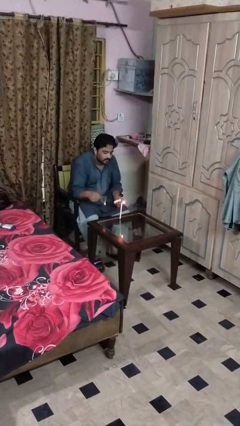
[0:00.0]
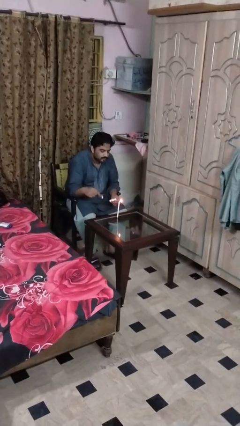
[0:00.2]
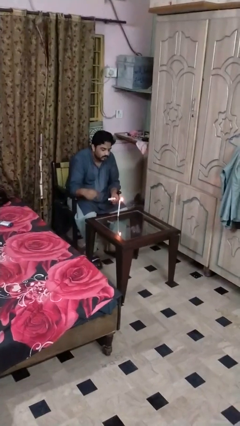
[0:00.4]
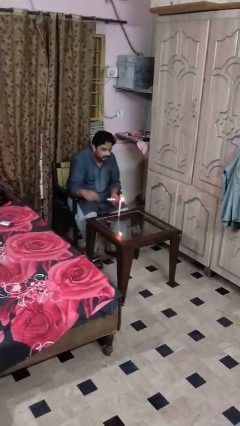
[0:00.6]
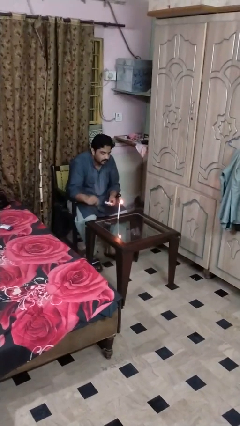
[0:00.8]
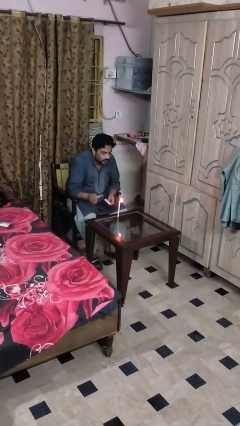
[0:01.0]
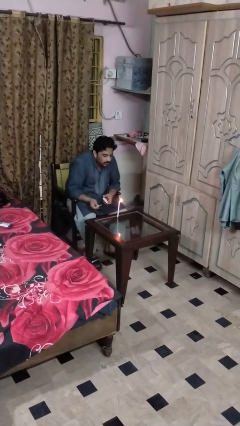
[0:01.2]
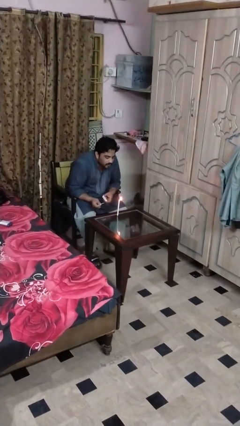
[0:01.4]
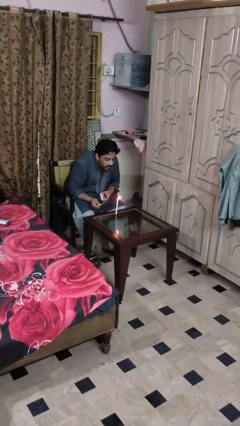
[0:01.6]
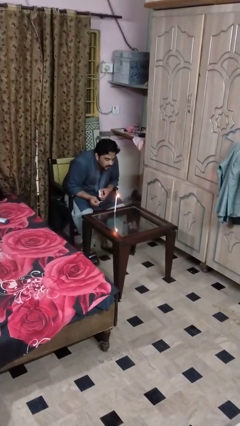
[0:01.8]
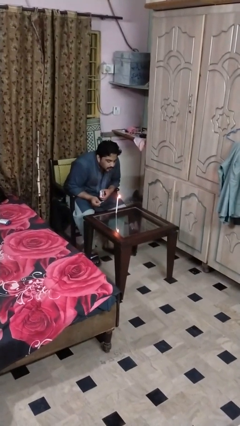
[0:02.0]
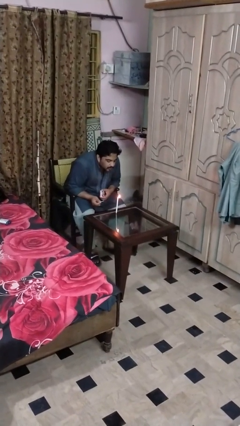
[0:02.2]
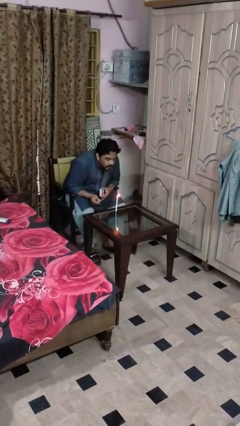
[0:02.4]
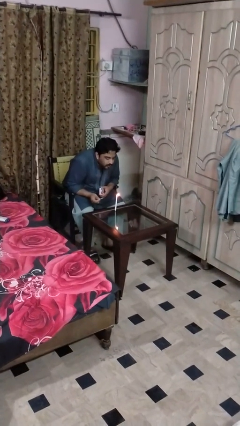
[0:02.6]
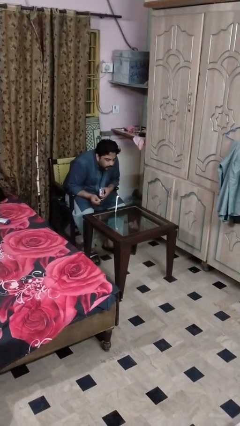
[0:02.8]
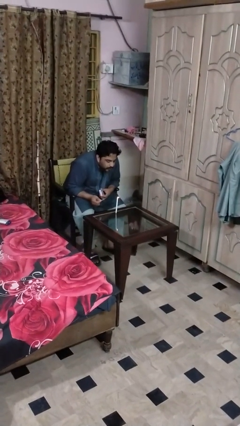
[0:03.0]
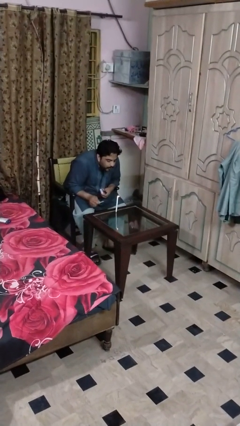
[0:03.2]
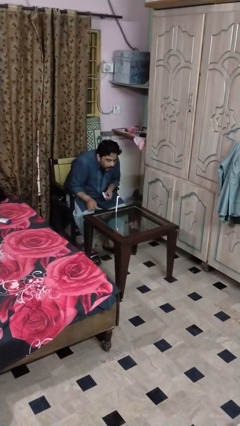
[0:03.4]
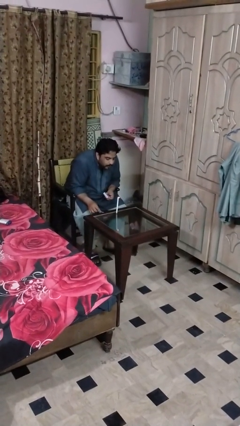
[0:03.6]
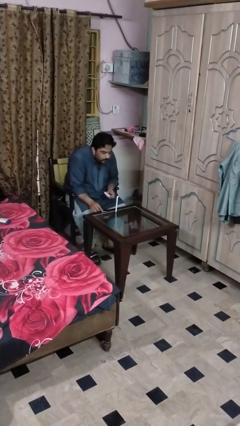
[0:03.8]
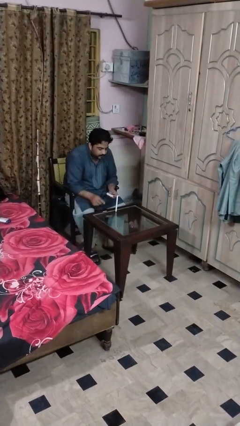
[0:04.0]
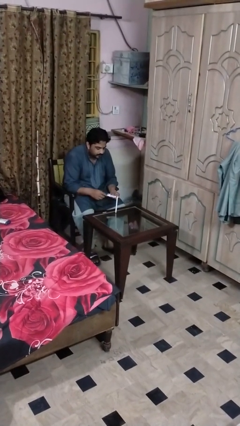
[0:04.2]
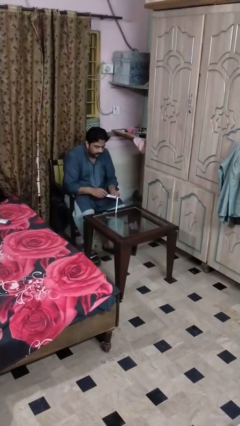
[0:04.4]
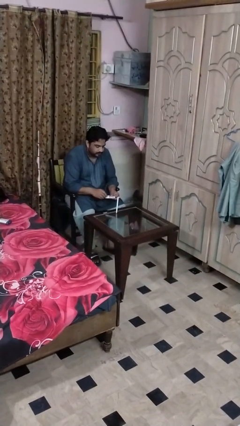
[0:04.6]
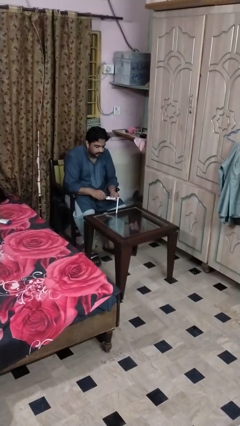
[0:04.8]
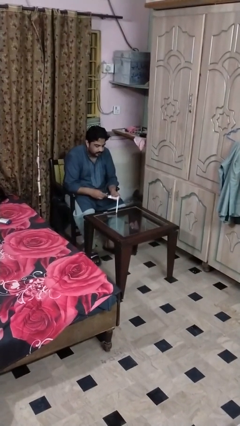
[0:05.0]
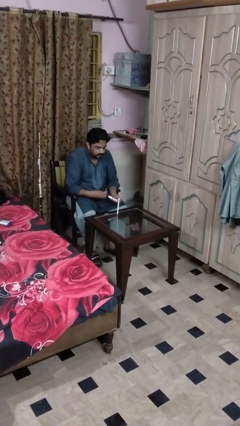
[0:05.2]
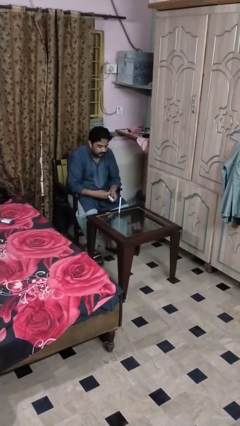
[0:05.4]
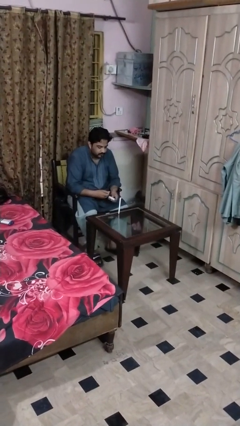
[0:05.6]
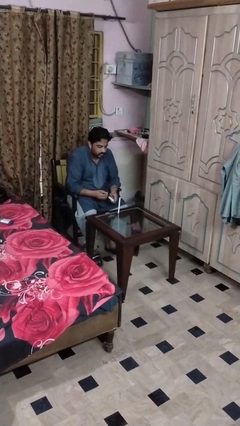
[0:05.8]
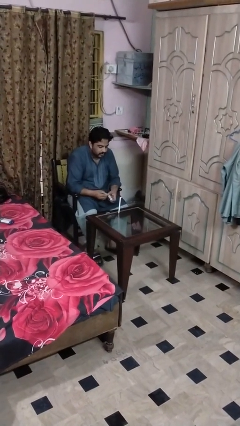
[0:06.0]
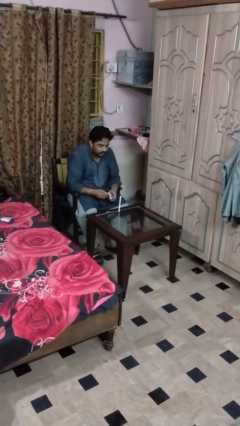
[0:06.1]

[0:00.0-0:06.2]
person extinguishes candle

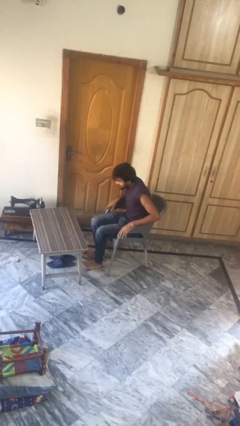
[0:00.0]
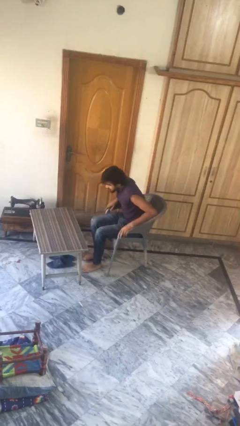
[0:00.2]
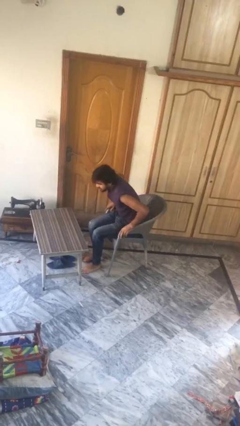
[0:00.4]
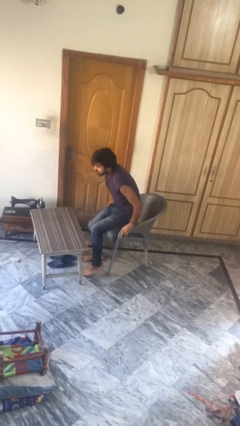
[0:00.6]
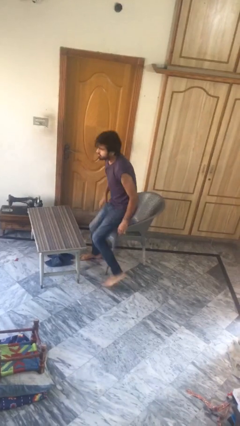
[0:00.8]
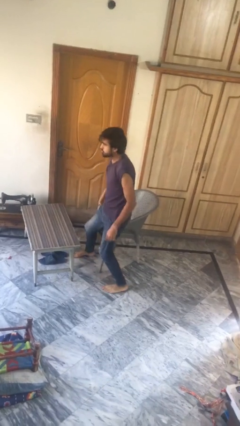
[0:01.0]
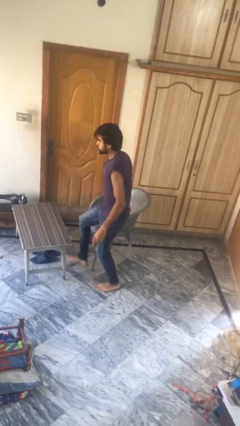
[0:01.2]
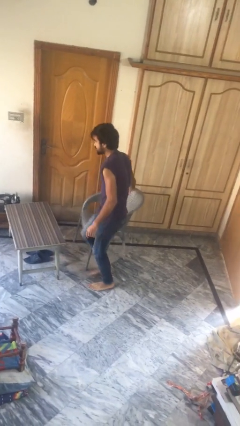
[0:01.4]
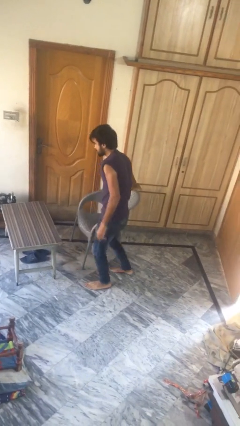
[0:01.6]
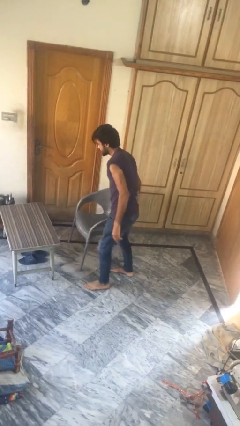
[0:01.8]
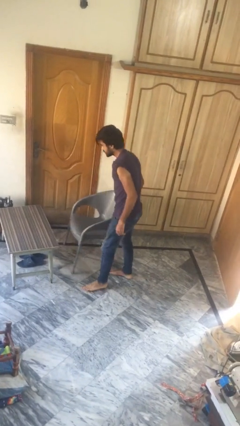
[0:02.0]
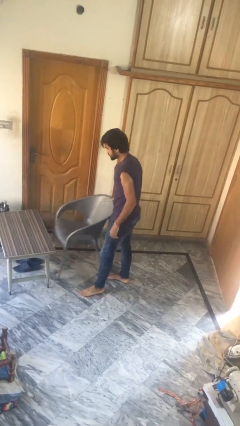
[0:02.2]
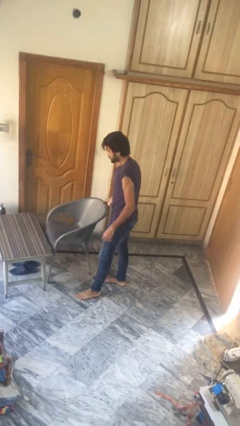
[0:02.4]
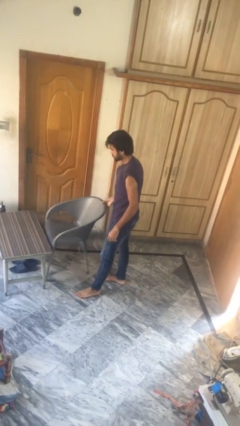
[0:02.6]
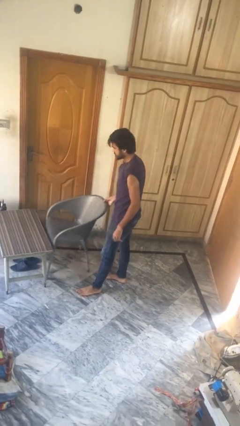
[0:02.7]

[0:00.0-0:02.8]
person stands up

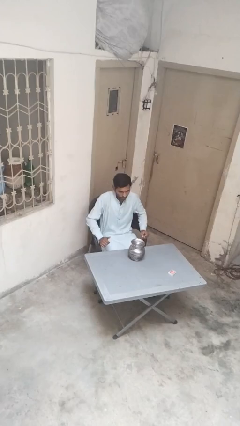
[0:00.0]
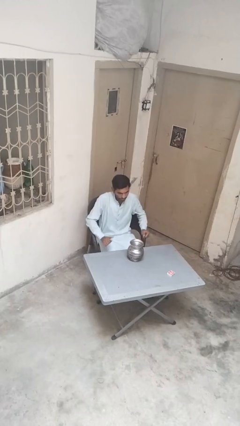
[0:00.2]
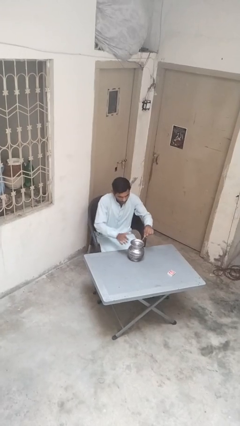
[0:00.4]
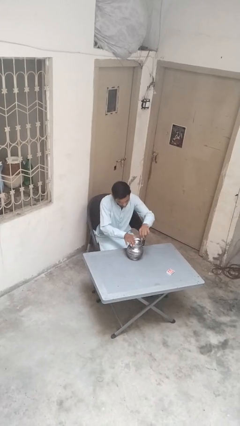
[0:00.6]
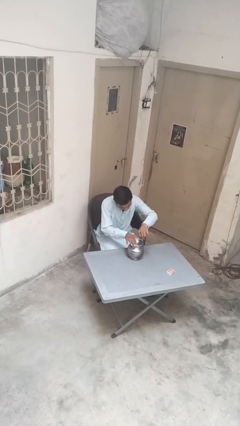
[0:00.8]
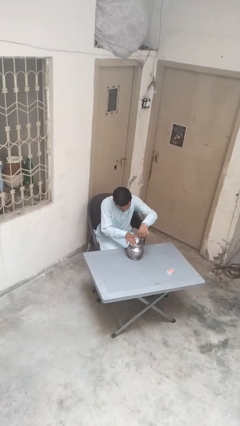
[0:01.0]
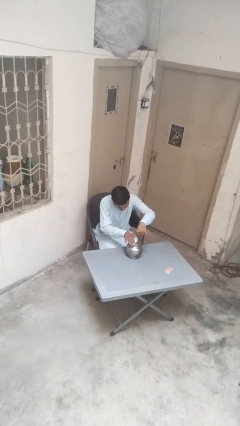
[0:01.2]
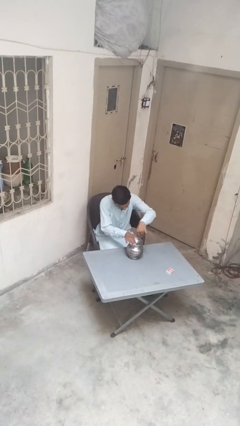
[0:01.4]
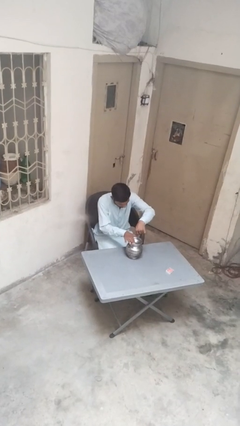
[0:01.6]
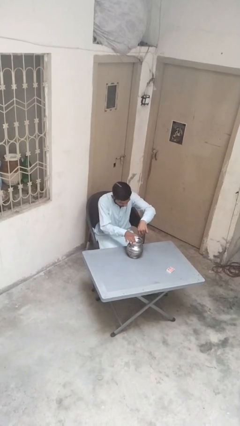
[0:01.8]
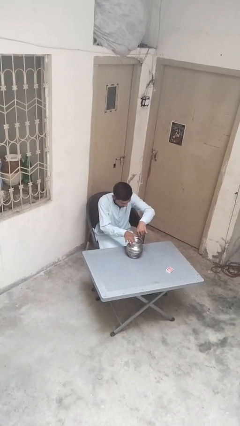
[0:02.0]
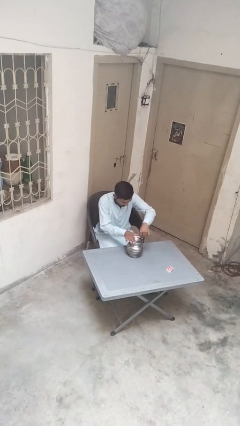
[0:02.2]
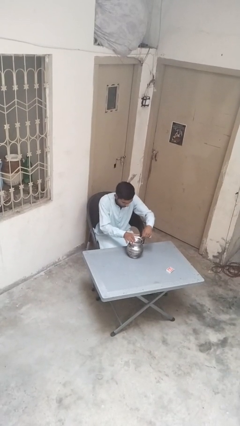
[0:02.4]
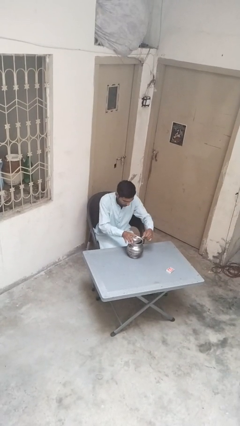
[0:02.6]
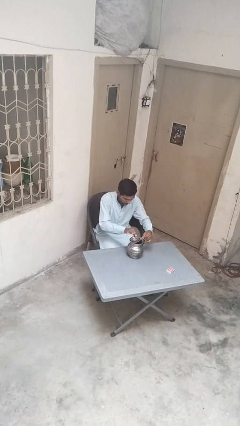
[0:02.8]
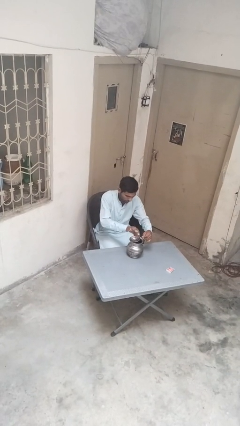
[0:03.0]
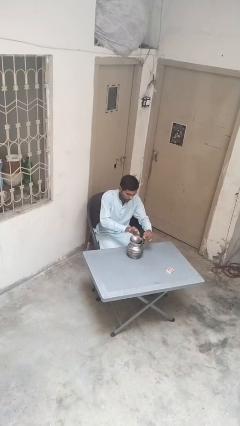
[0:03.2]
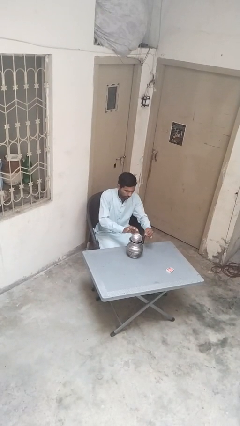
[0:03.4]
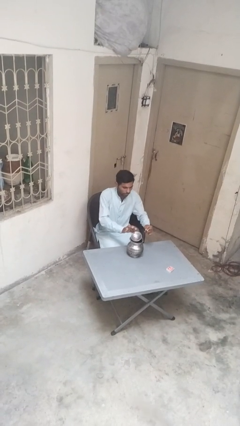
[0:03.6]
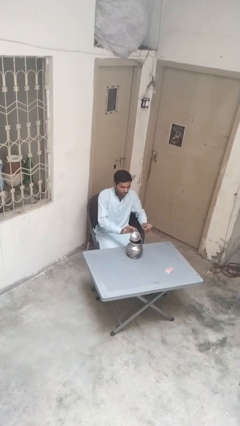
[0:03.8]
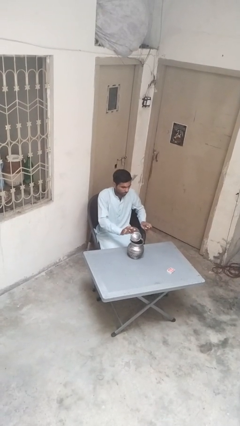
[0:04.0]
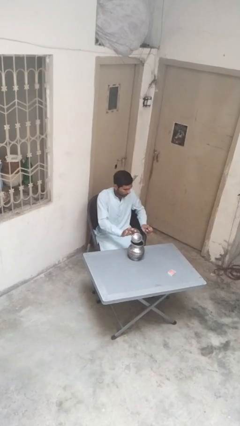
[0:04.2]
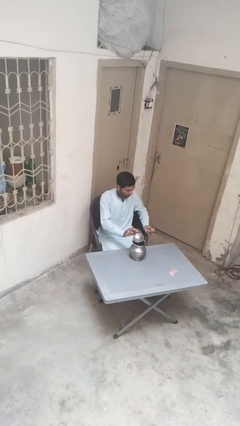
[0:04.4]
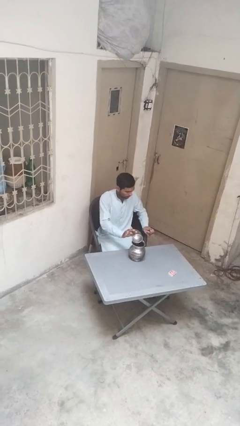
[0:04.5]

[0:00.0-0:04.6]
person opens can with can opener

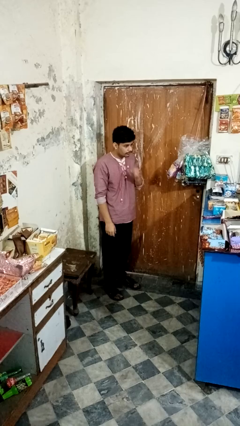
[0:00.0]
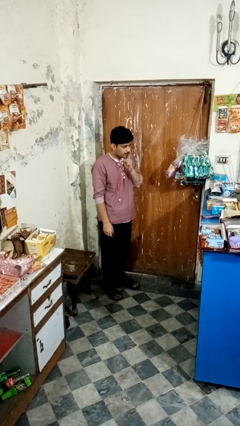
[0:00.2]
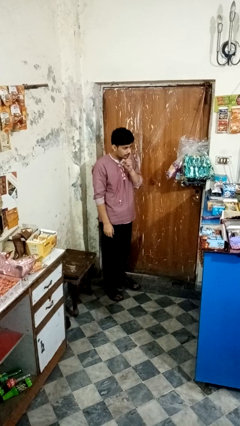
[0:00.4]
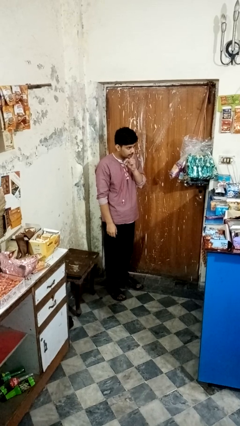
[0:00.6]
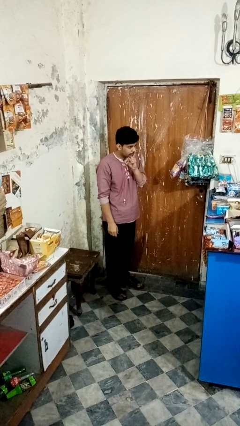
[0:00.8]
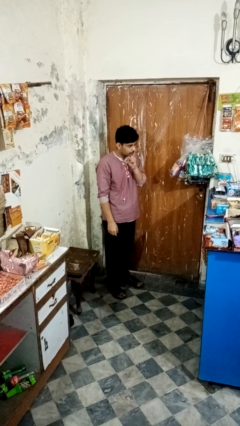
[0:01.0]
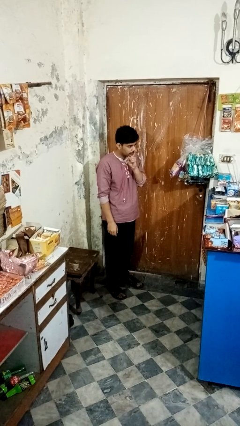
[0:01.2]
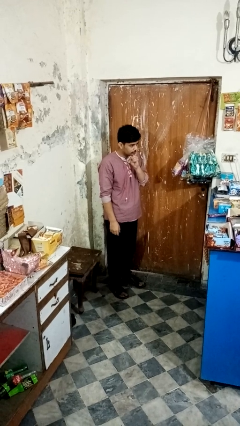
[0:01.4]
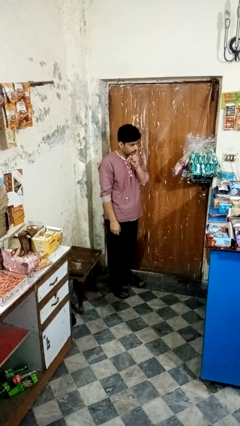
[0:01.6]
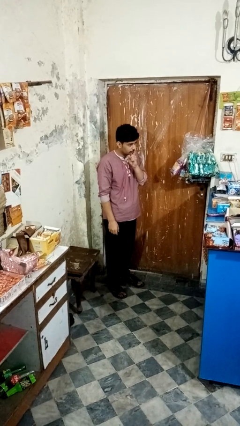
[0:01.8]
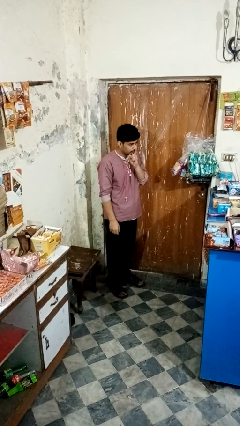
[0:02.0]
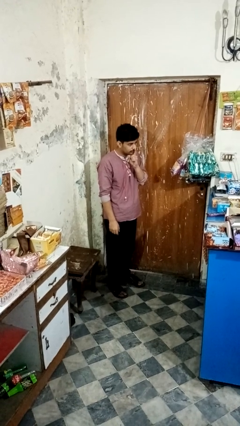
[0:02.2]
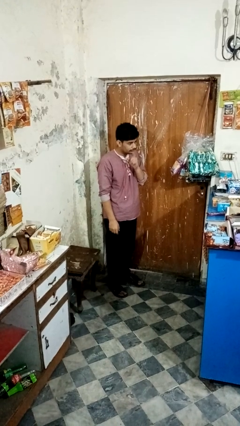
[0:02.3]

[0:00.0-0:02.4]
person gestures be quiet

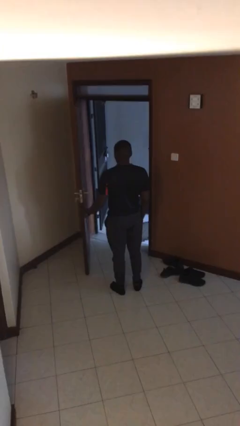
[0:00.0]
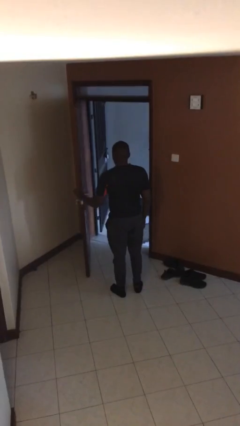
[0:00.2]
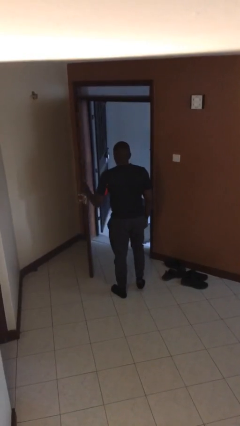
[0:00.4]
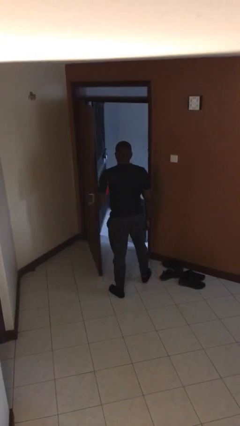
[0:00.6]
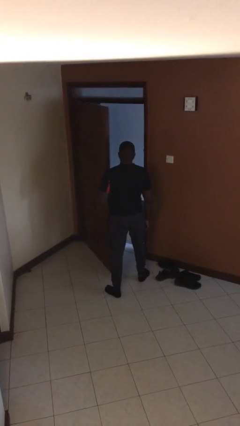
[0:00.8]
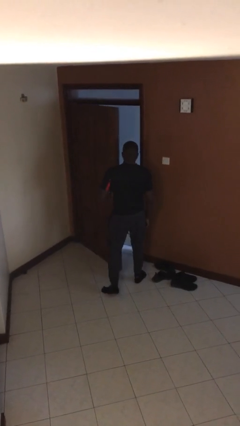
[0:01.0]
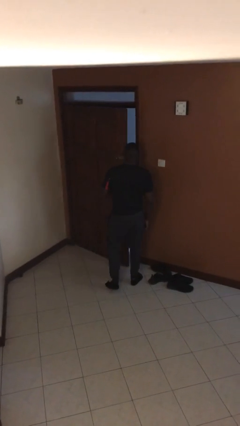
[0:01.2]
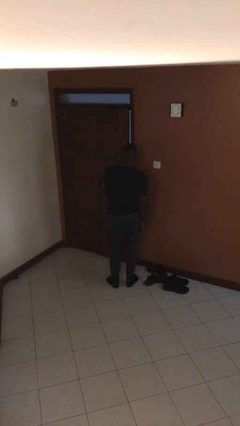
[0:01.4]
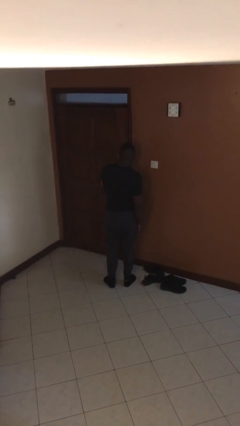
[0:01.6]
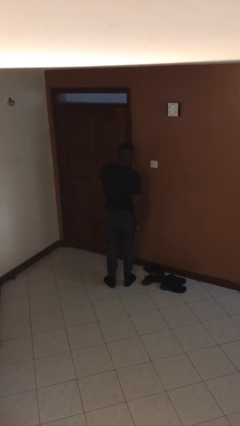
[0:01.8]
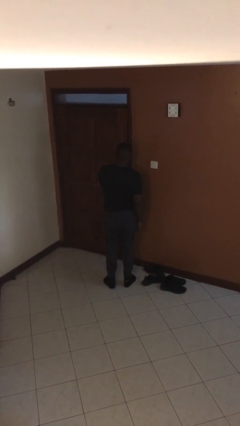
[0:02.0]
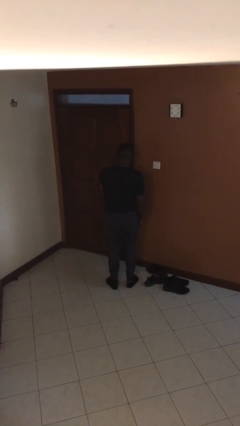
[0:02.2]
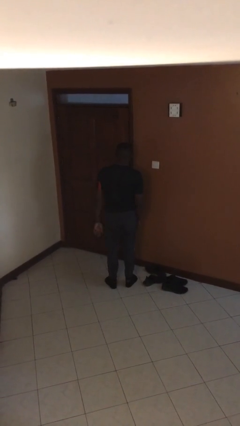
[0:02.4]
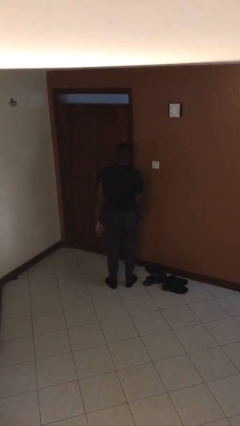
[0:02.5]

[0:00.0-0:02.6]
person closes facility door
